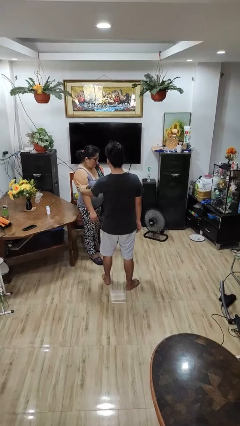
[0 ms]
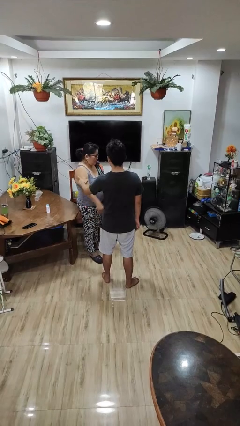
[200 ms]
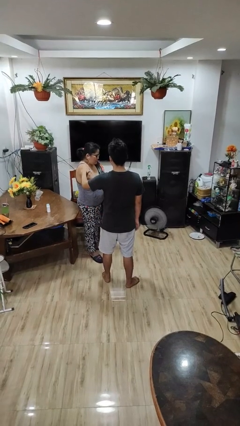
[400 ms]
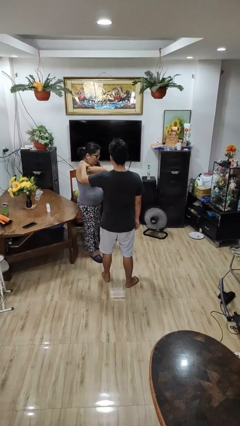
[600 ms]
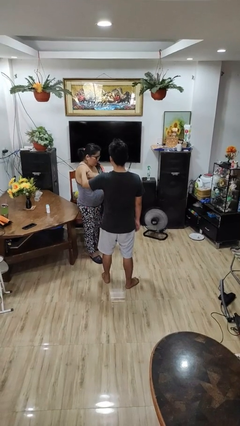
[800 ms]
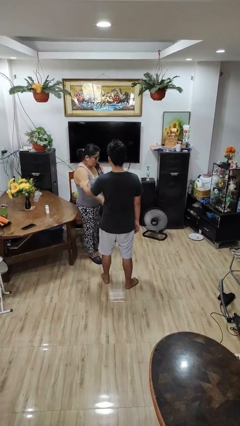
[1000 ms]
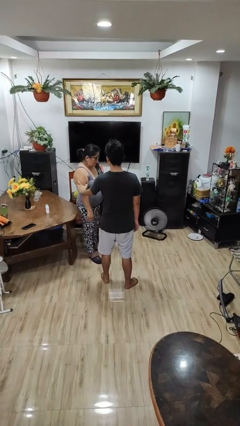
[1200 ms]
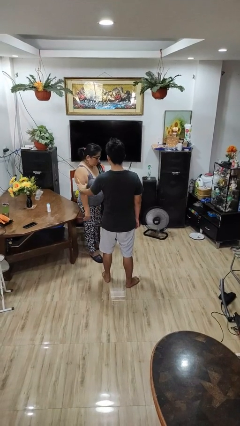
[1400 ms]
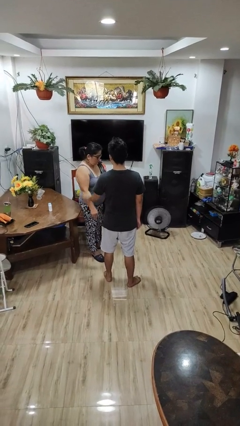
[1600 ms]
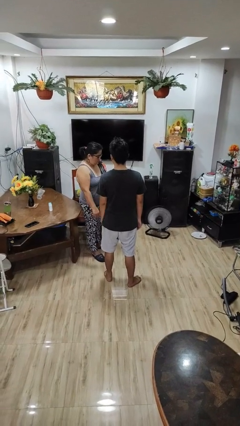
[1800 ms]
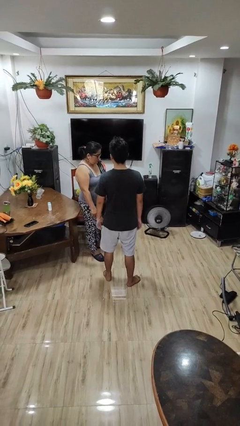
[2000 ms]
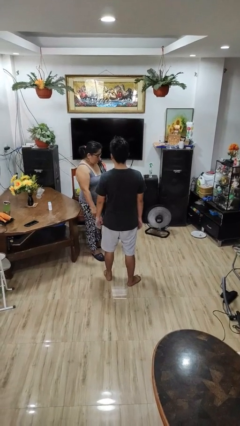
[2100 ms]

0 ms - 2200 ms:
person grabs person by bicep

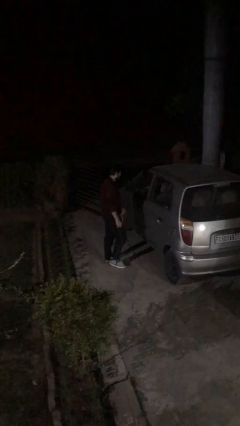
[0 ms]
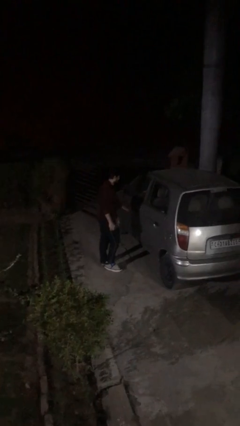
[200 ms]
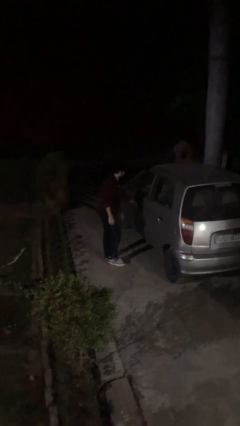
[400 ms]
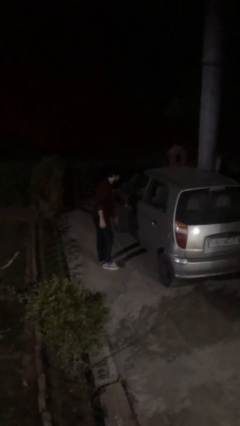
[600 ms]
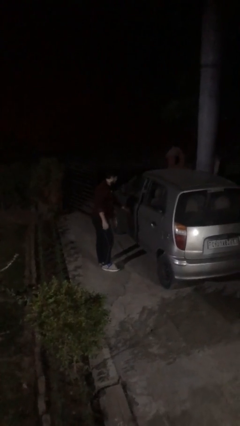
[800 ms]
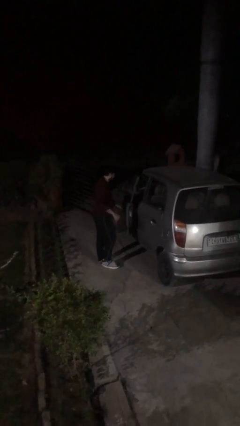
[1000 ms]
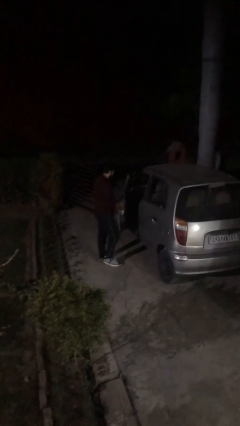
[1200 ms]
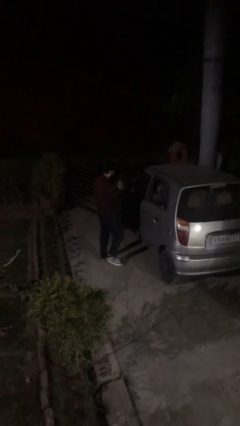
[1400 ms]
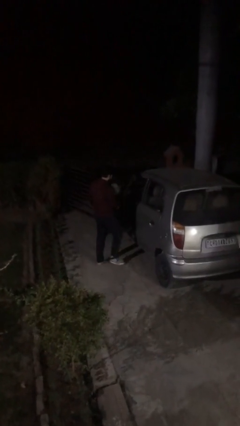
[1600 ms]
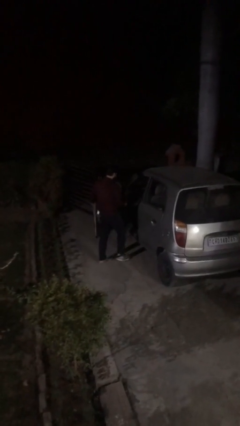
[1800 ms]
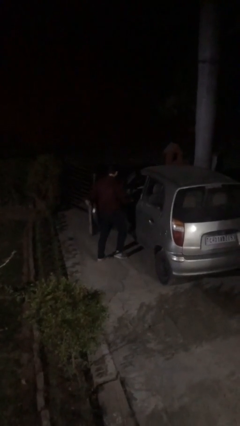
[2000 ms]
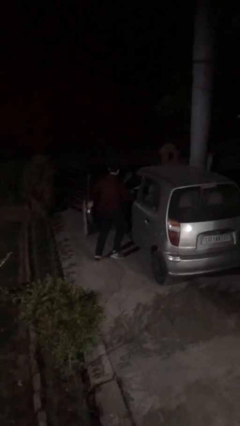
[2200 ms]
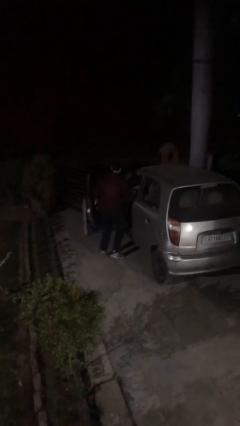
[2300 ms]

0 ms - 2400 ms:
person opens car door

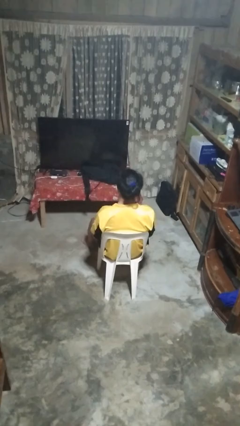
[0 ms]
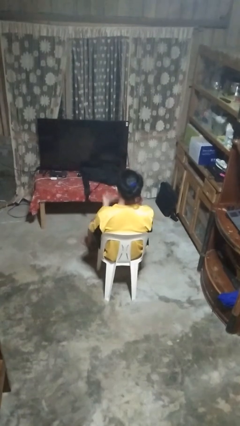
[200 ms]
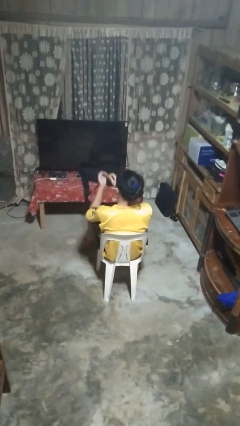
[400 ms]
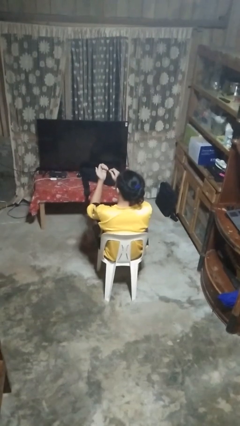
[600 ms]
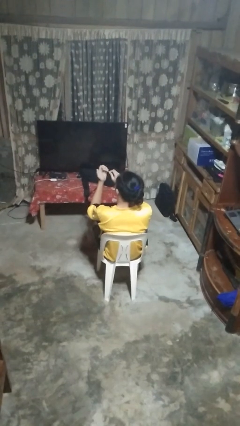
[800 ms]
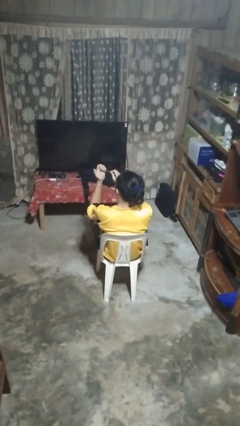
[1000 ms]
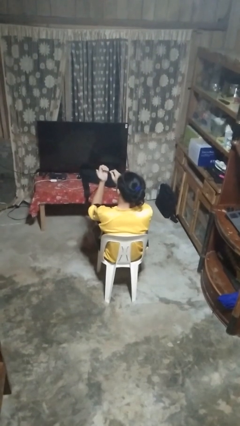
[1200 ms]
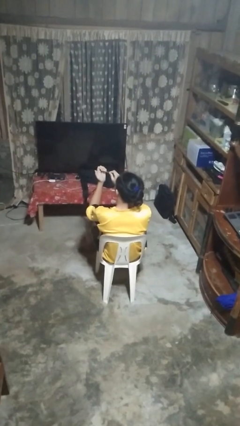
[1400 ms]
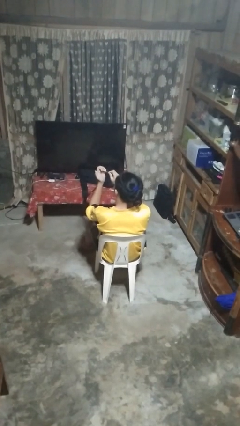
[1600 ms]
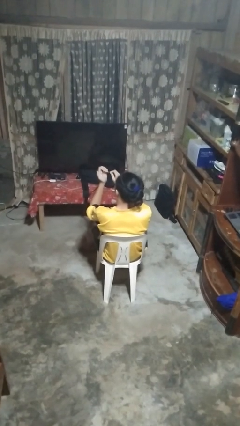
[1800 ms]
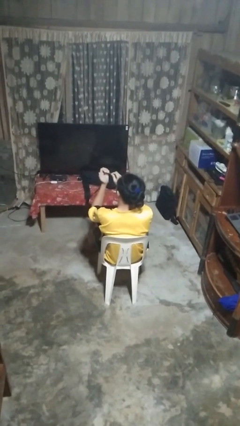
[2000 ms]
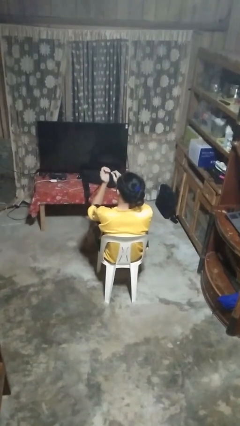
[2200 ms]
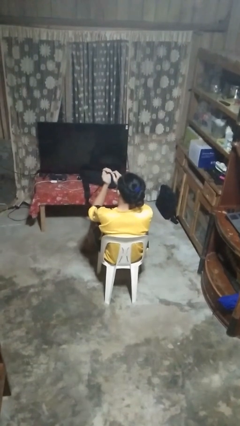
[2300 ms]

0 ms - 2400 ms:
person files fingernails

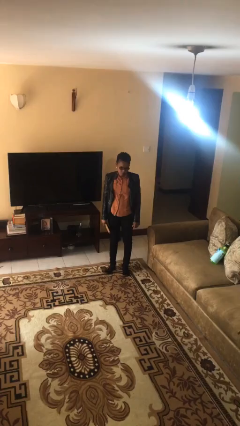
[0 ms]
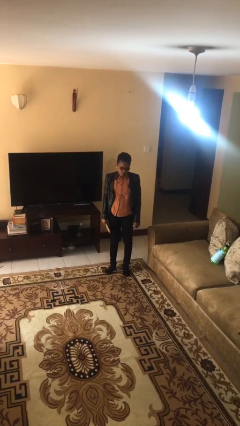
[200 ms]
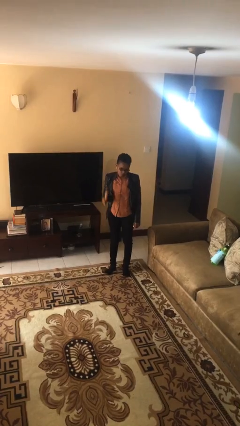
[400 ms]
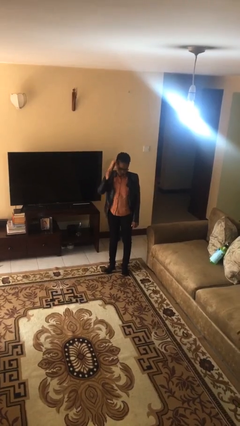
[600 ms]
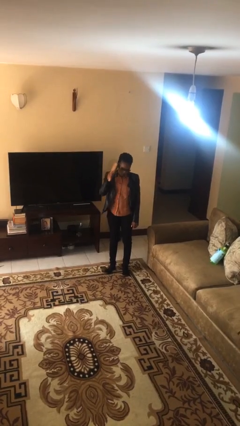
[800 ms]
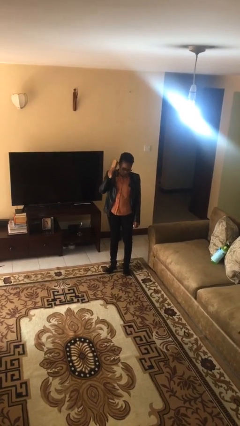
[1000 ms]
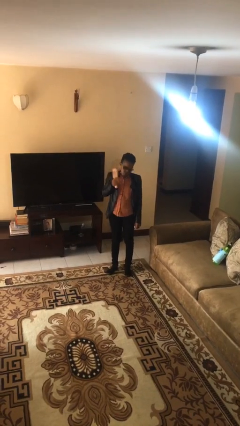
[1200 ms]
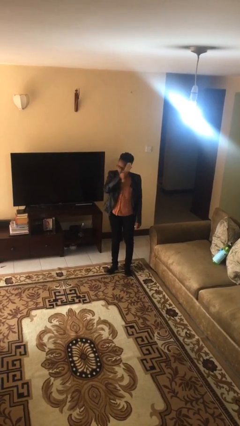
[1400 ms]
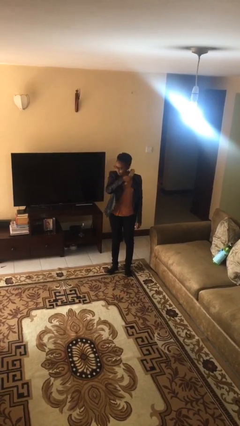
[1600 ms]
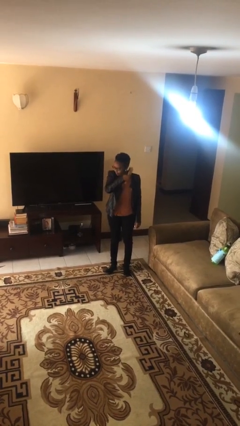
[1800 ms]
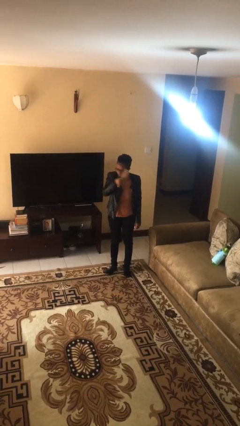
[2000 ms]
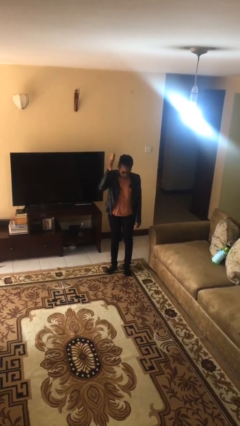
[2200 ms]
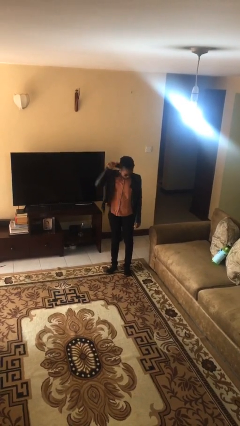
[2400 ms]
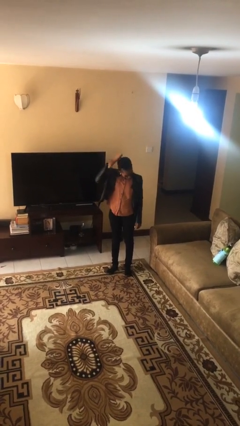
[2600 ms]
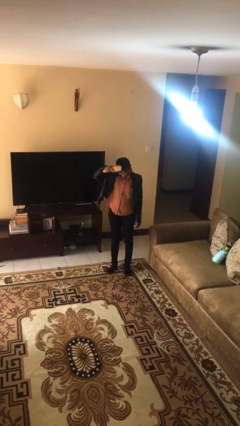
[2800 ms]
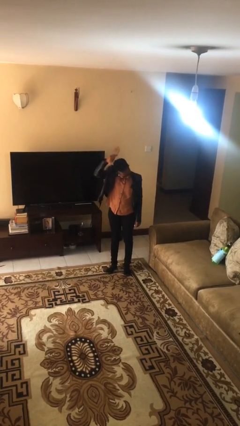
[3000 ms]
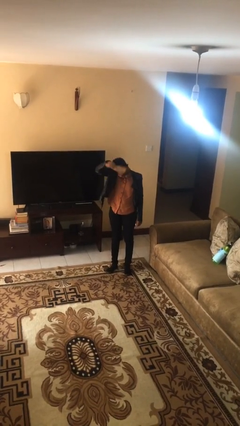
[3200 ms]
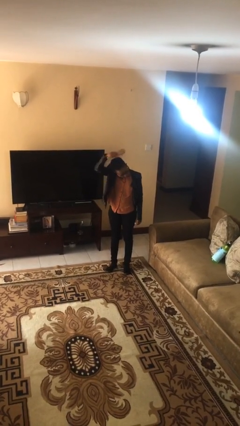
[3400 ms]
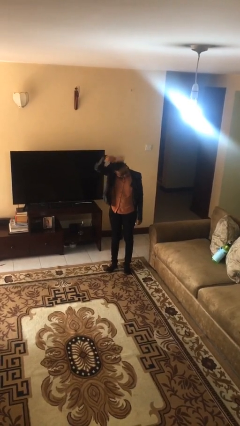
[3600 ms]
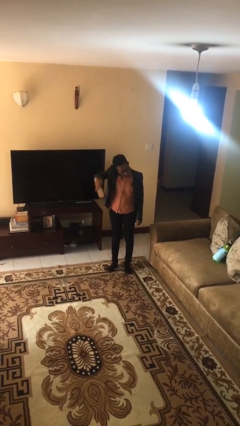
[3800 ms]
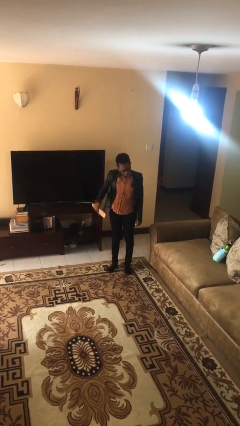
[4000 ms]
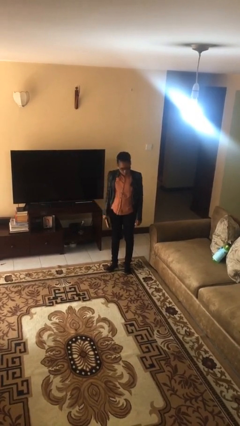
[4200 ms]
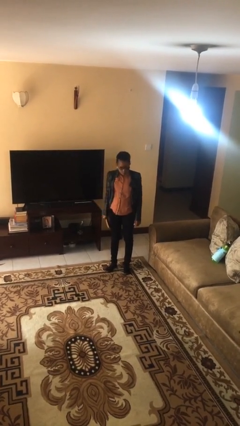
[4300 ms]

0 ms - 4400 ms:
person brushes hair

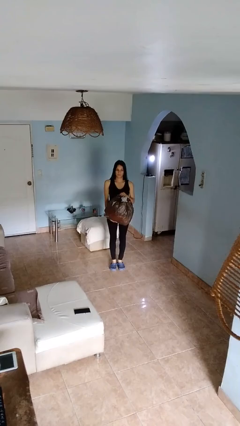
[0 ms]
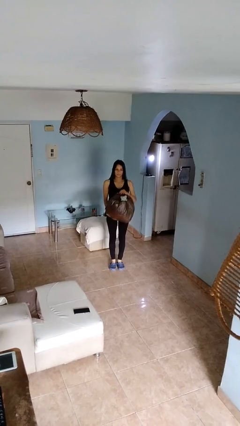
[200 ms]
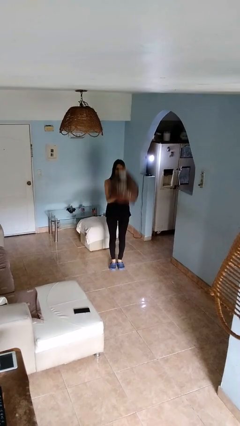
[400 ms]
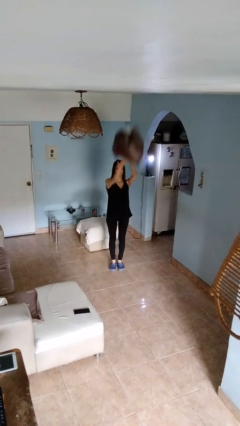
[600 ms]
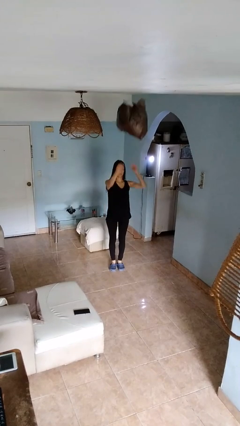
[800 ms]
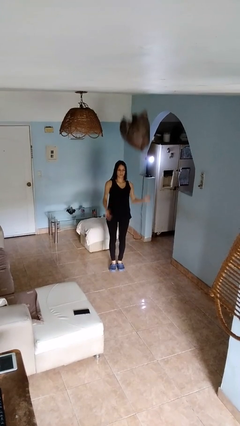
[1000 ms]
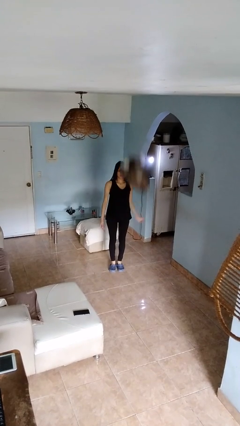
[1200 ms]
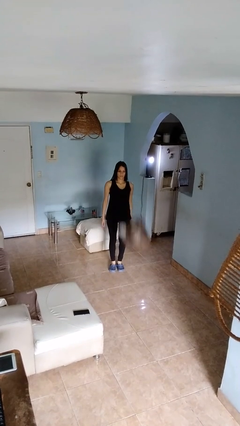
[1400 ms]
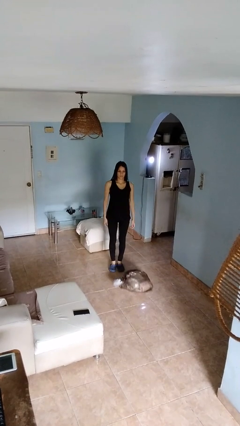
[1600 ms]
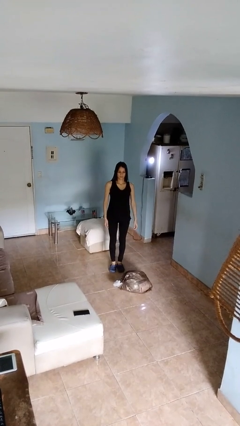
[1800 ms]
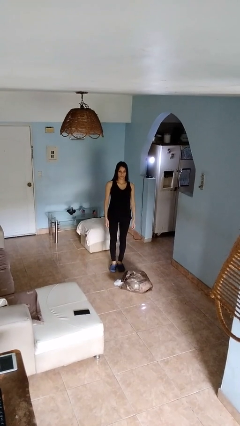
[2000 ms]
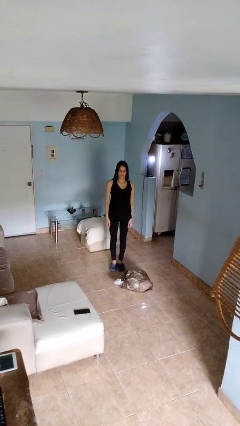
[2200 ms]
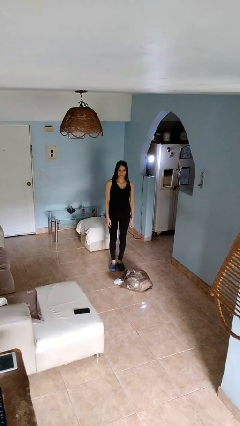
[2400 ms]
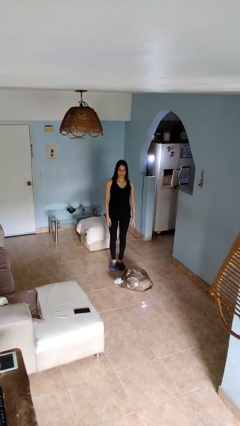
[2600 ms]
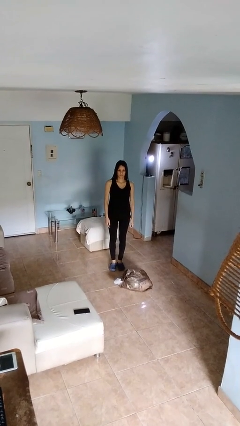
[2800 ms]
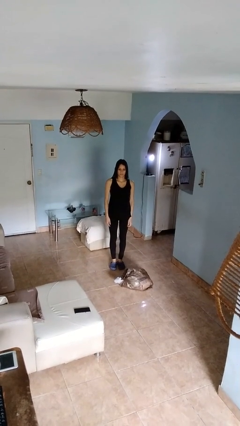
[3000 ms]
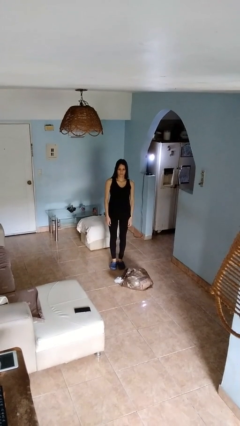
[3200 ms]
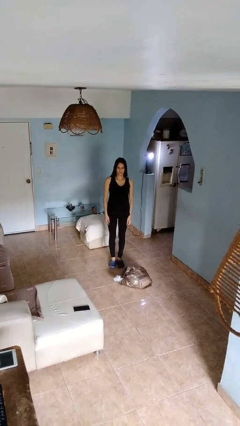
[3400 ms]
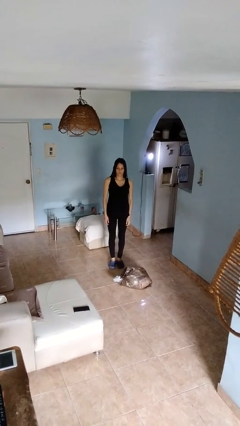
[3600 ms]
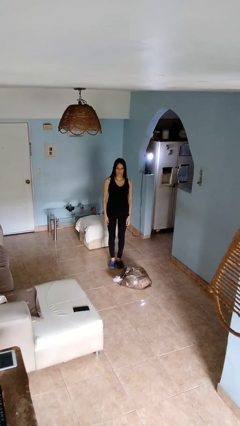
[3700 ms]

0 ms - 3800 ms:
person throws object into air

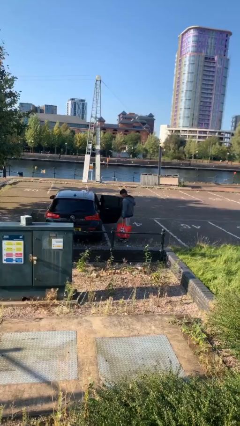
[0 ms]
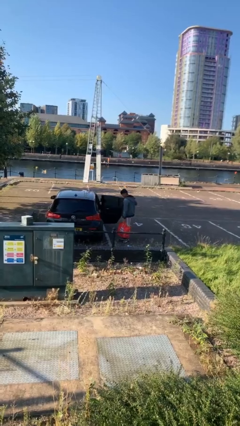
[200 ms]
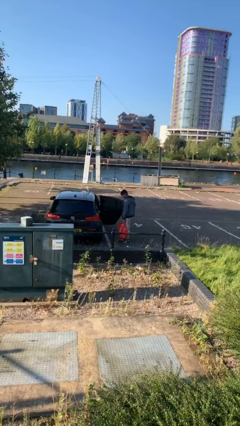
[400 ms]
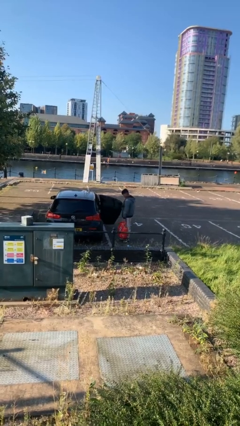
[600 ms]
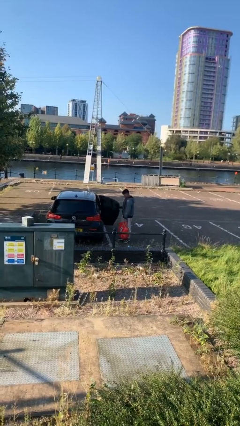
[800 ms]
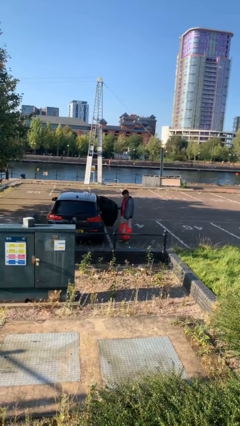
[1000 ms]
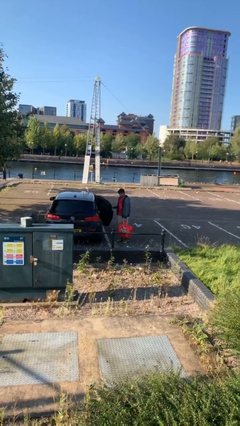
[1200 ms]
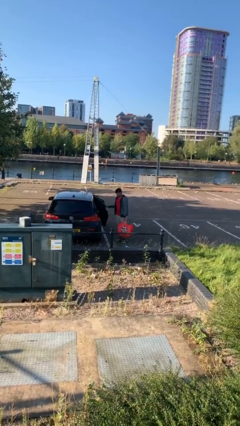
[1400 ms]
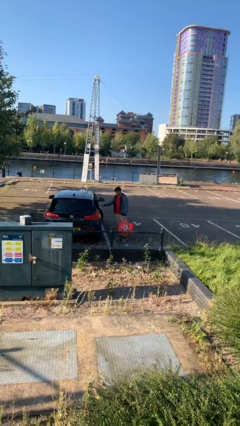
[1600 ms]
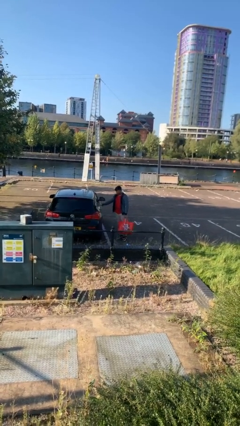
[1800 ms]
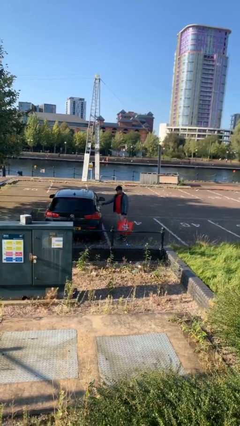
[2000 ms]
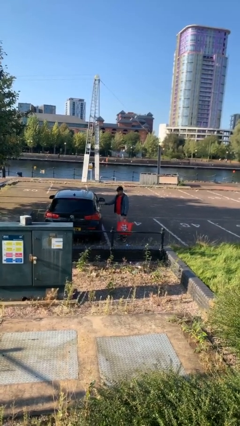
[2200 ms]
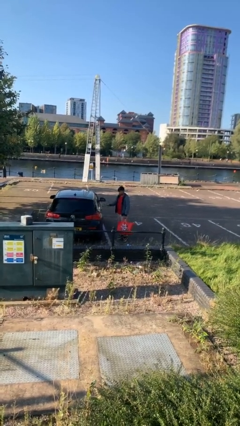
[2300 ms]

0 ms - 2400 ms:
person closes car door
